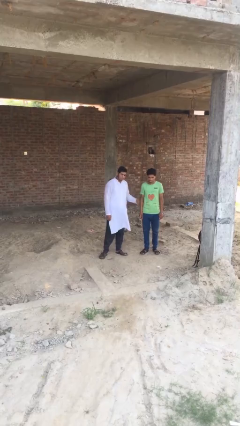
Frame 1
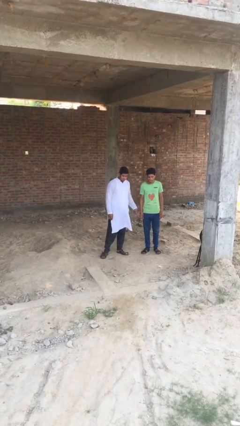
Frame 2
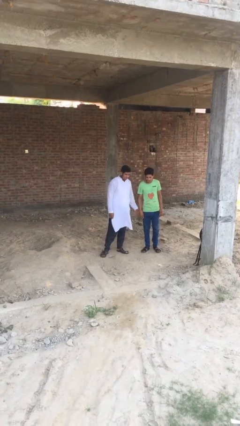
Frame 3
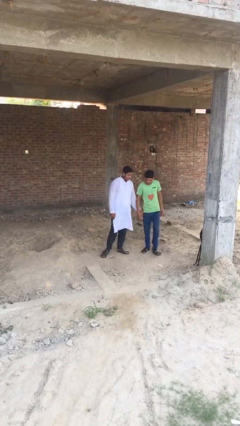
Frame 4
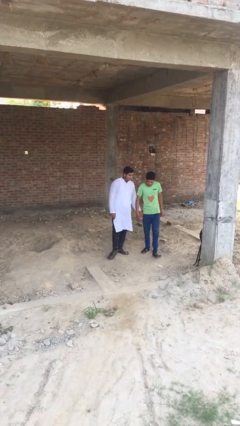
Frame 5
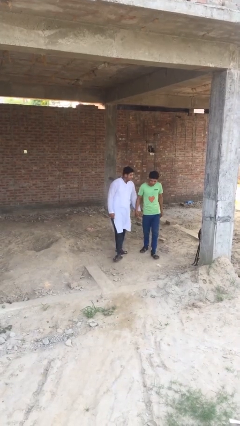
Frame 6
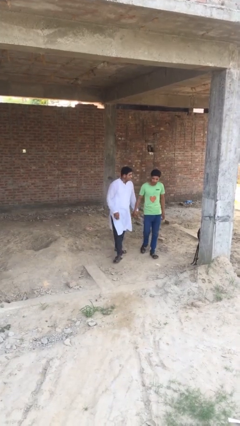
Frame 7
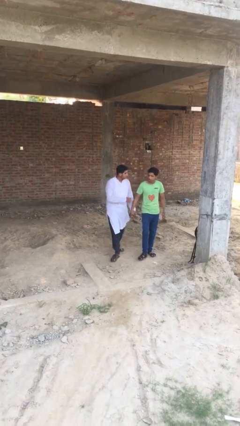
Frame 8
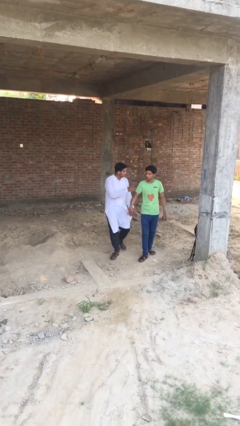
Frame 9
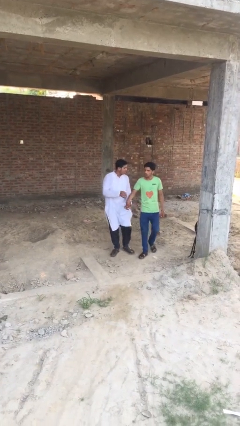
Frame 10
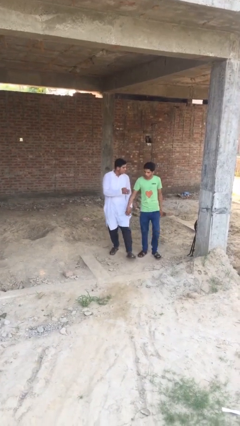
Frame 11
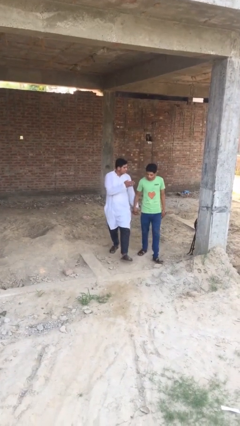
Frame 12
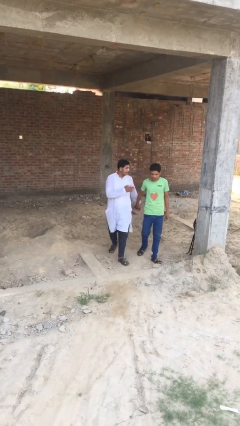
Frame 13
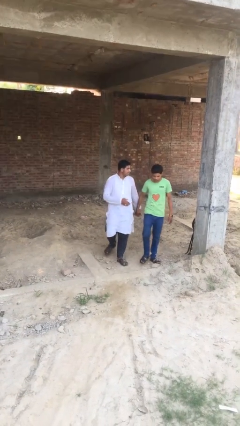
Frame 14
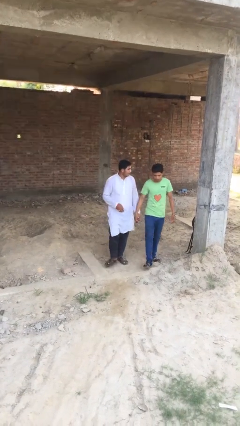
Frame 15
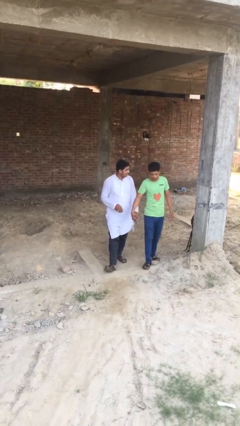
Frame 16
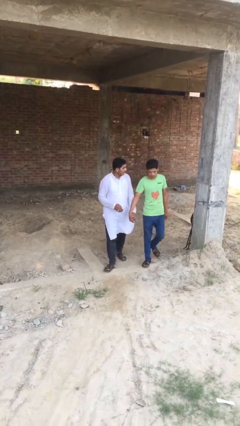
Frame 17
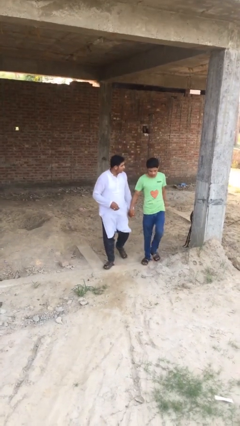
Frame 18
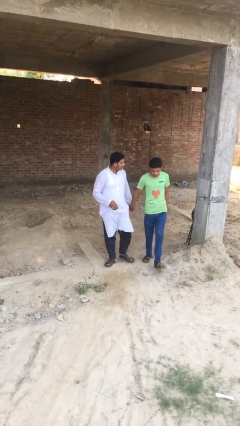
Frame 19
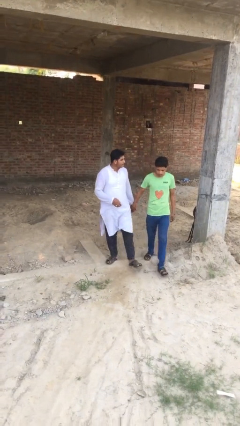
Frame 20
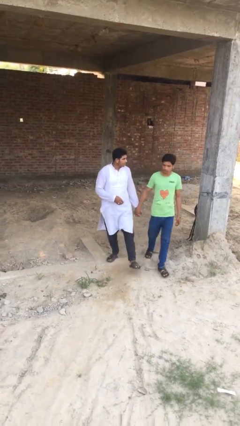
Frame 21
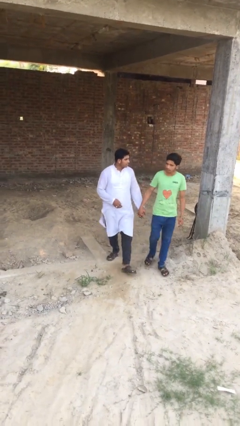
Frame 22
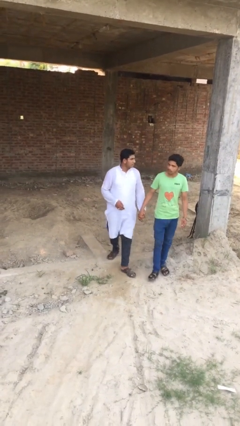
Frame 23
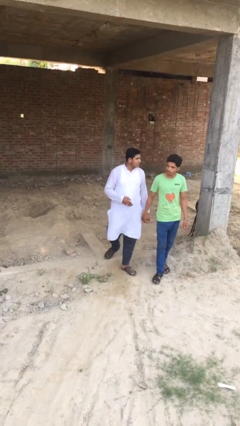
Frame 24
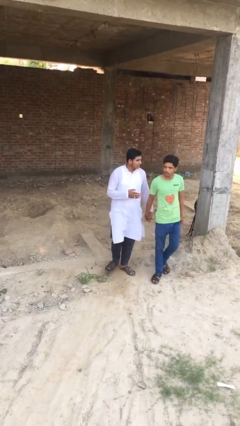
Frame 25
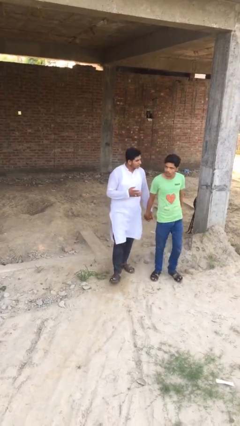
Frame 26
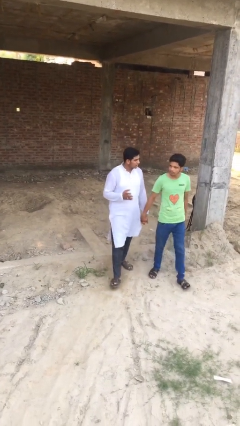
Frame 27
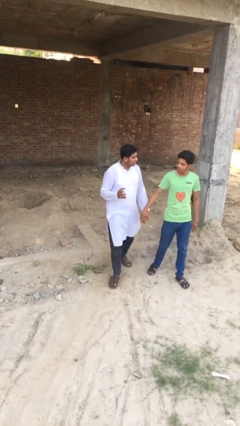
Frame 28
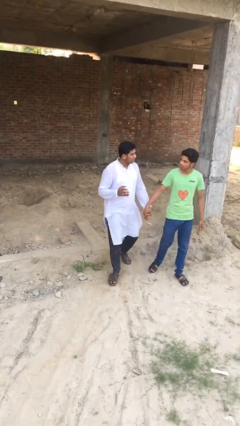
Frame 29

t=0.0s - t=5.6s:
person holds hand

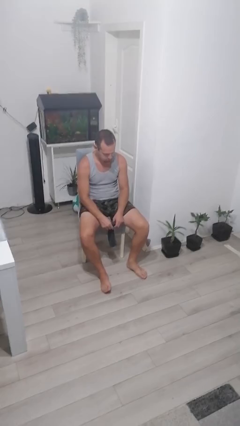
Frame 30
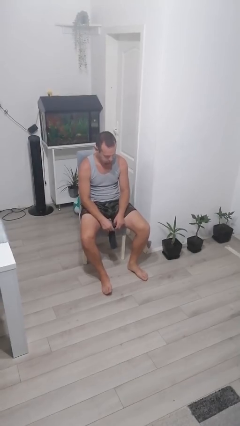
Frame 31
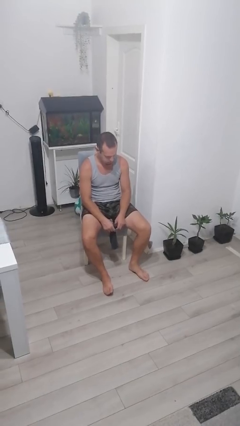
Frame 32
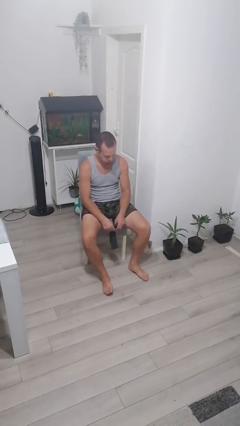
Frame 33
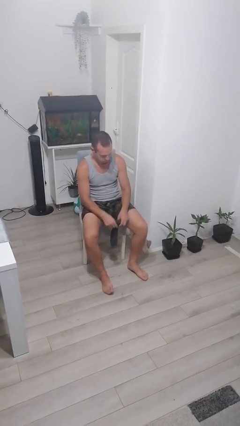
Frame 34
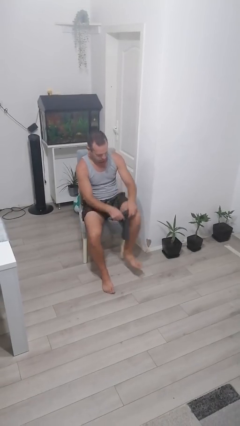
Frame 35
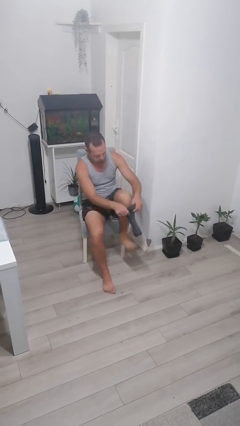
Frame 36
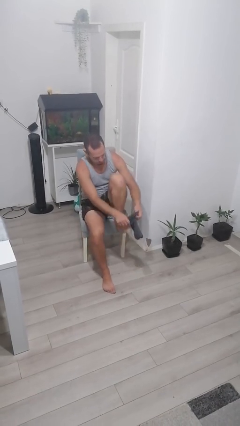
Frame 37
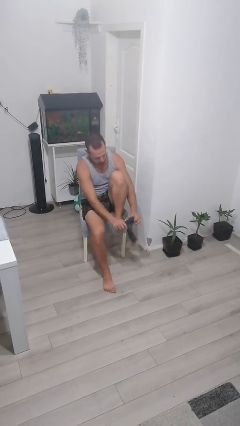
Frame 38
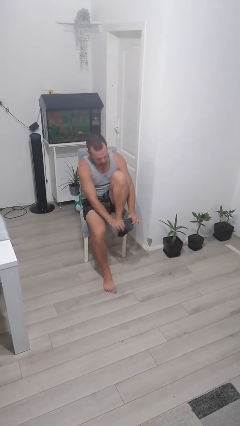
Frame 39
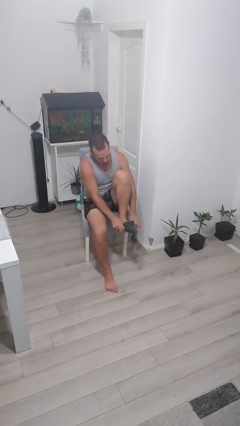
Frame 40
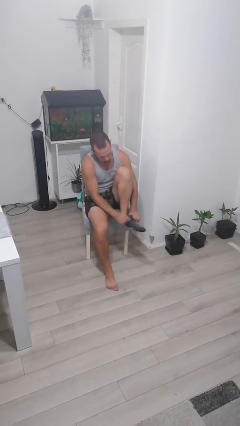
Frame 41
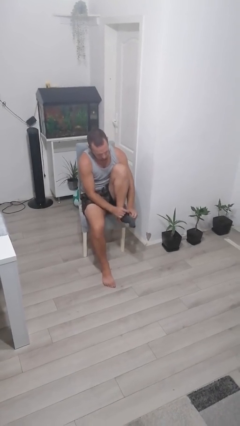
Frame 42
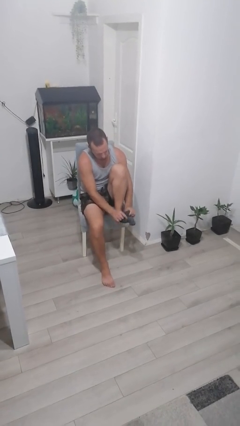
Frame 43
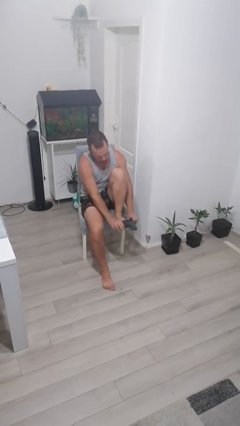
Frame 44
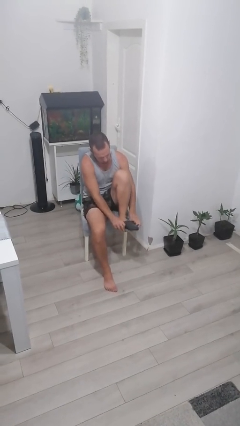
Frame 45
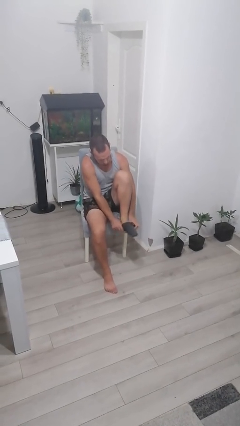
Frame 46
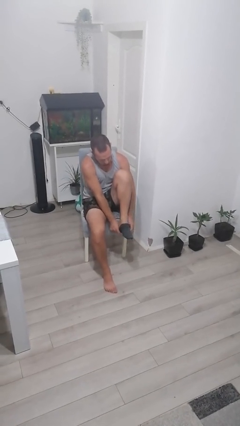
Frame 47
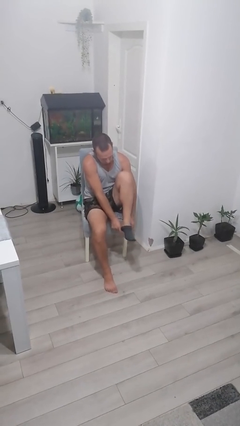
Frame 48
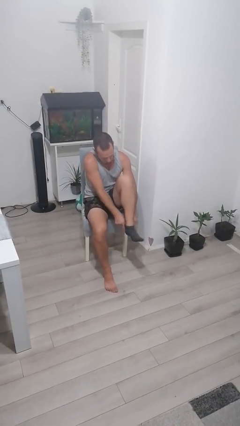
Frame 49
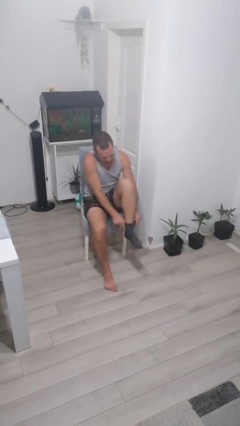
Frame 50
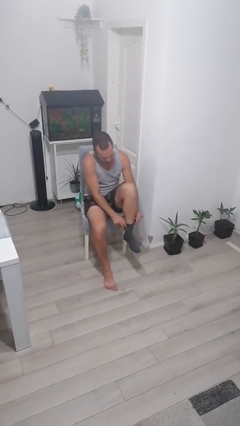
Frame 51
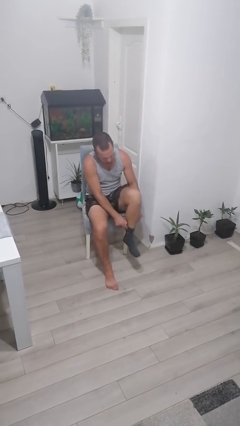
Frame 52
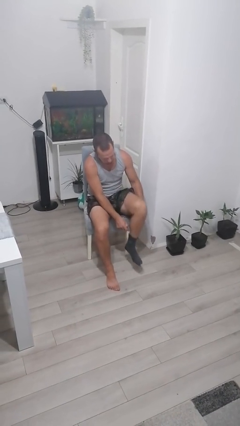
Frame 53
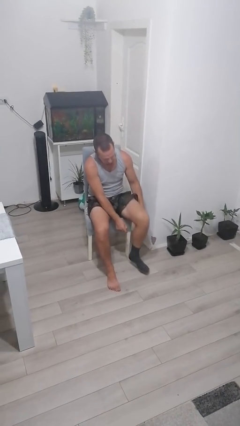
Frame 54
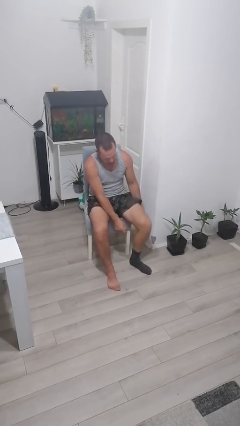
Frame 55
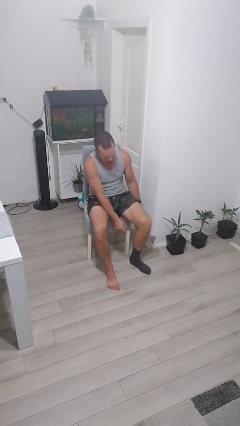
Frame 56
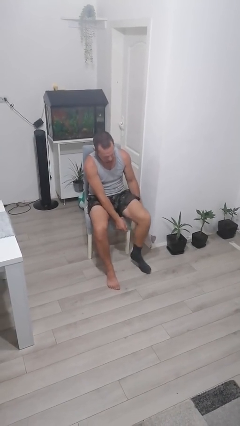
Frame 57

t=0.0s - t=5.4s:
person puts on socks

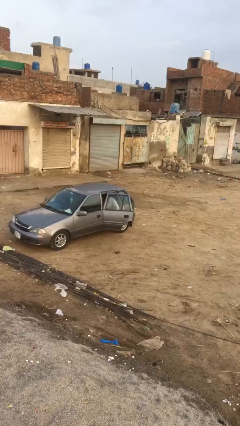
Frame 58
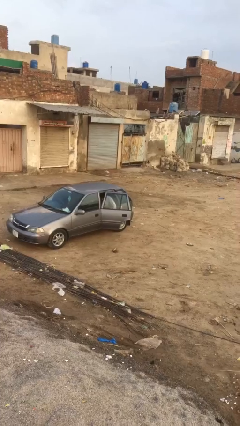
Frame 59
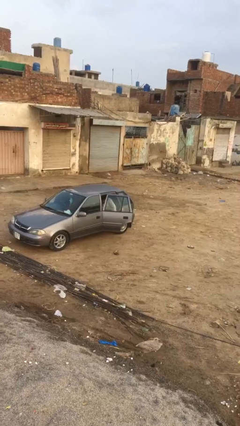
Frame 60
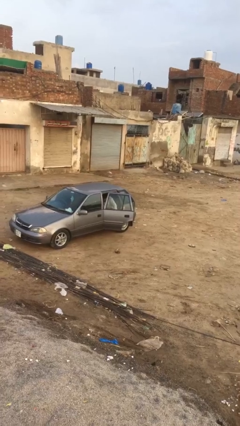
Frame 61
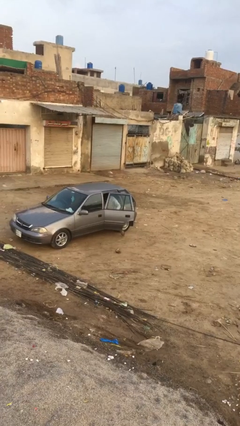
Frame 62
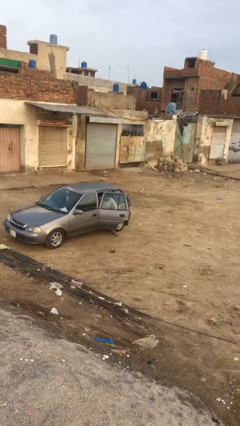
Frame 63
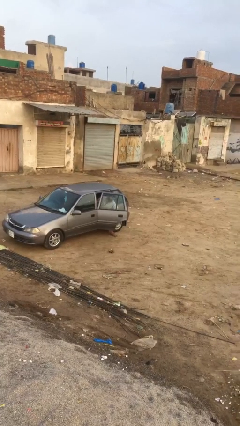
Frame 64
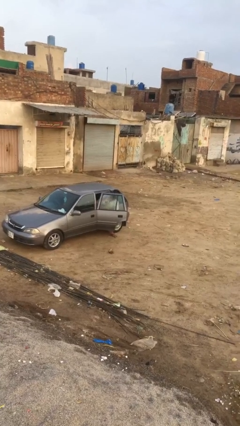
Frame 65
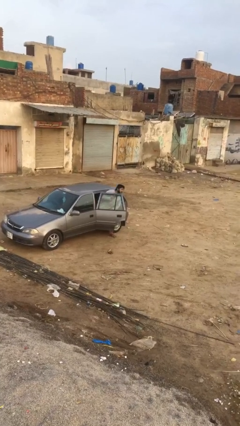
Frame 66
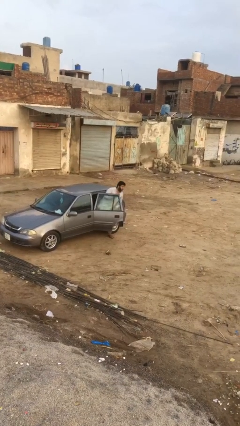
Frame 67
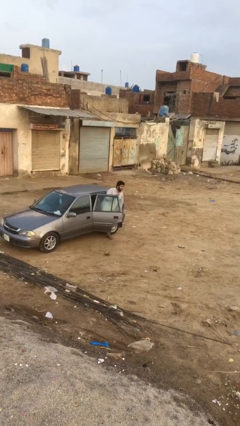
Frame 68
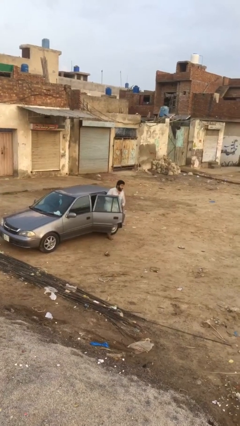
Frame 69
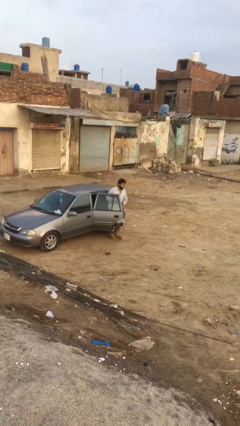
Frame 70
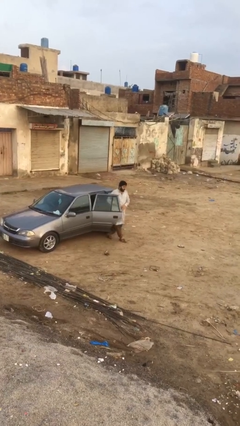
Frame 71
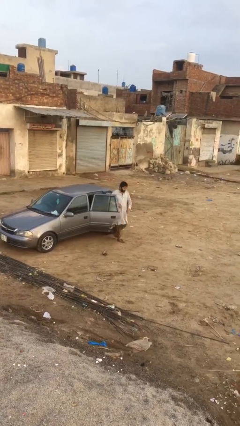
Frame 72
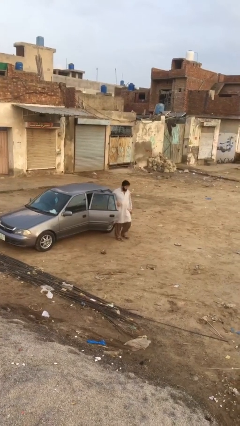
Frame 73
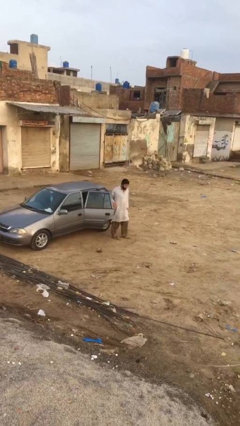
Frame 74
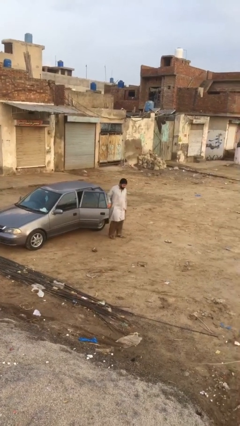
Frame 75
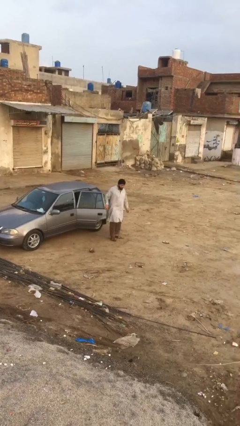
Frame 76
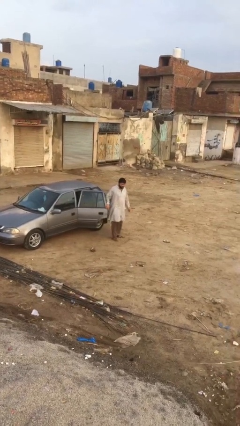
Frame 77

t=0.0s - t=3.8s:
person exits car

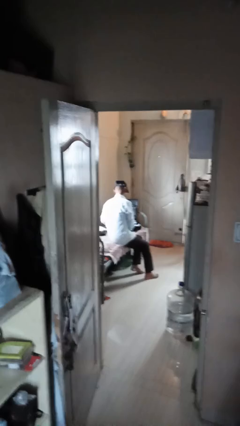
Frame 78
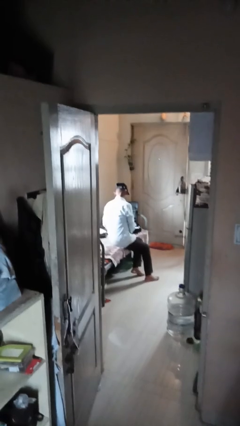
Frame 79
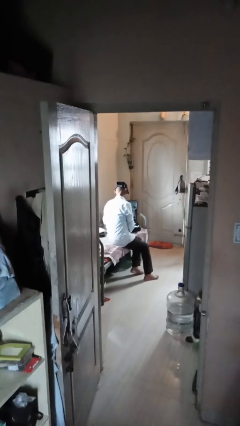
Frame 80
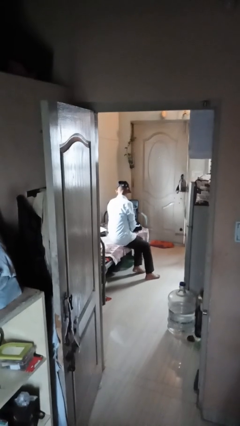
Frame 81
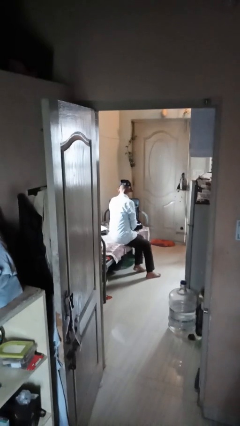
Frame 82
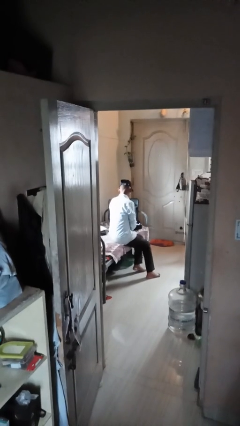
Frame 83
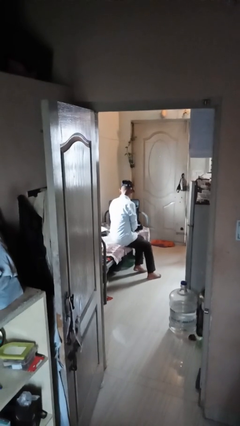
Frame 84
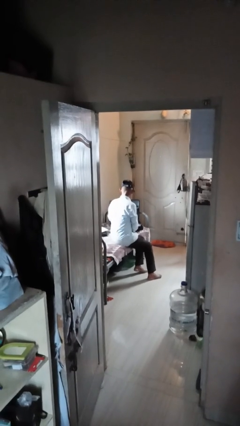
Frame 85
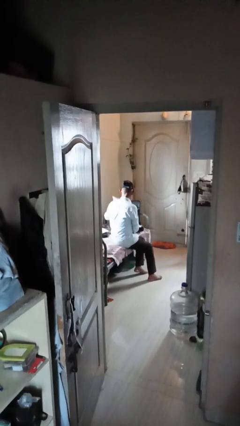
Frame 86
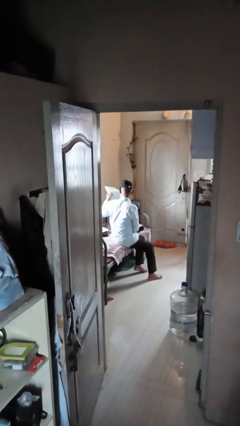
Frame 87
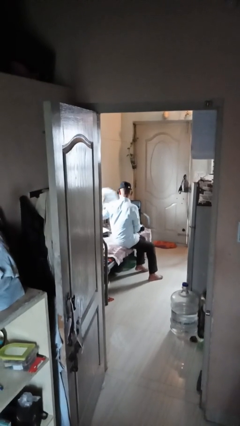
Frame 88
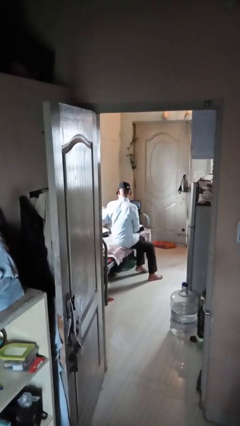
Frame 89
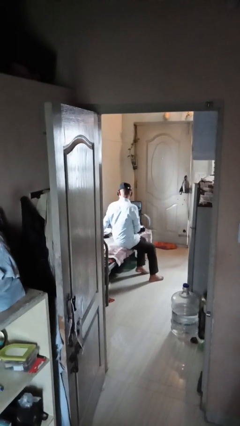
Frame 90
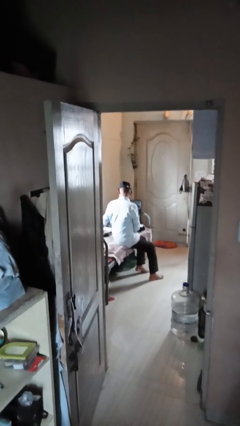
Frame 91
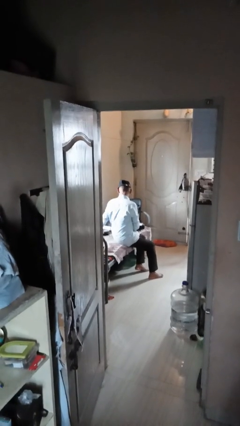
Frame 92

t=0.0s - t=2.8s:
person unloads clothes from suitcase

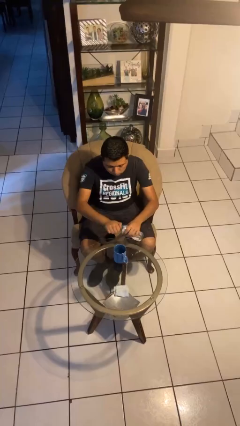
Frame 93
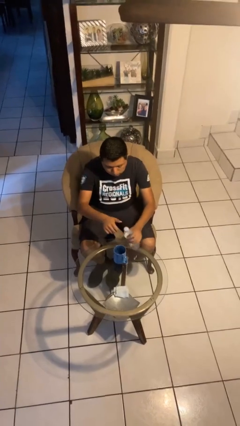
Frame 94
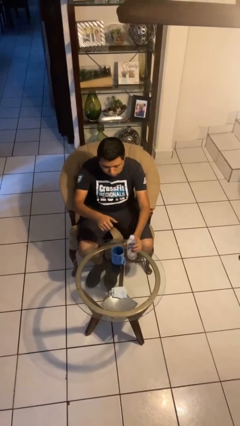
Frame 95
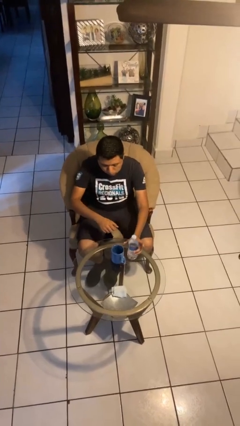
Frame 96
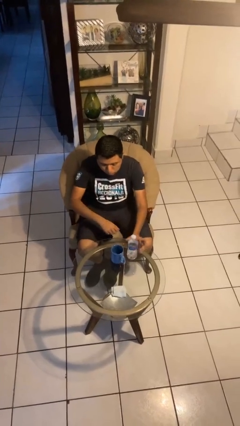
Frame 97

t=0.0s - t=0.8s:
person screws lid to bottle
